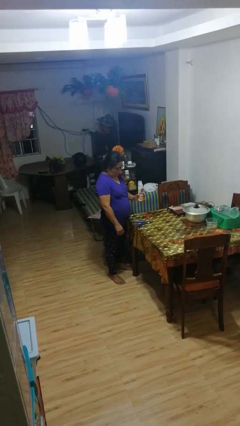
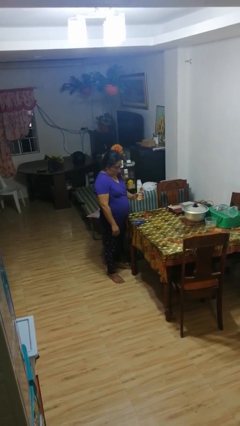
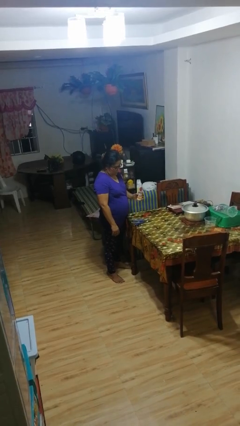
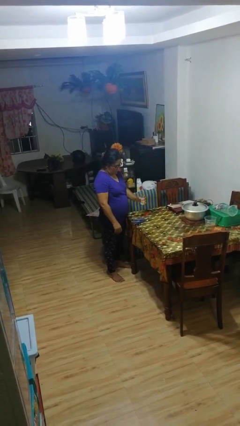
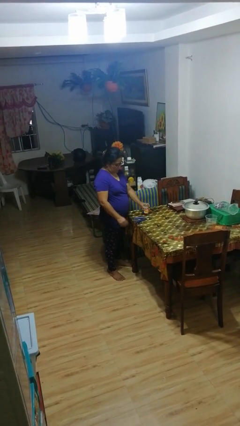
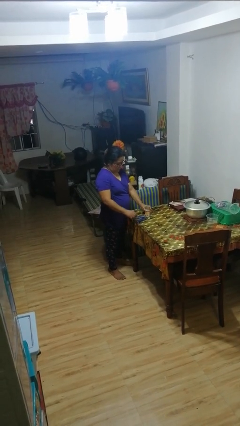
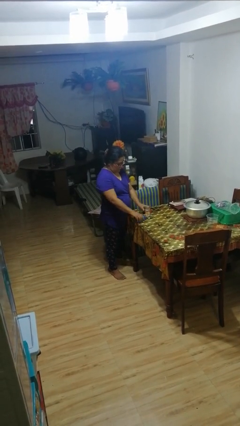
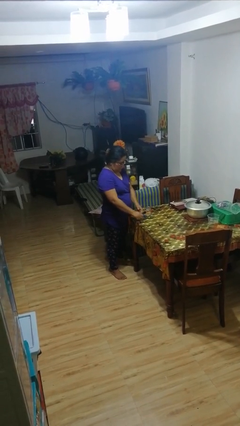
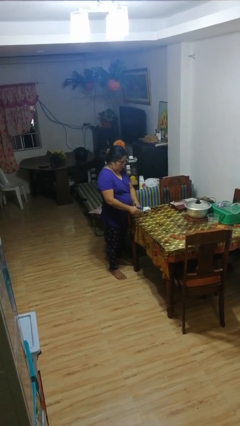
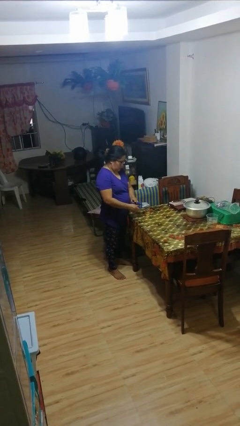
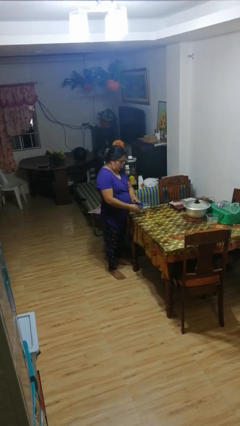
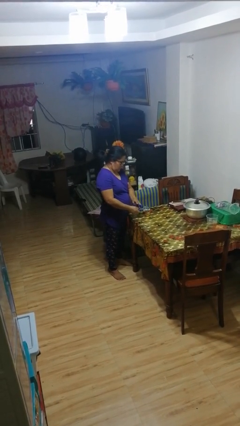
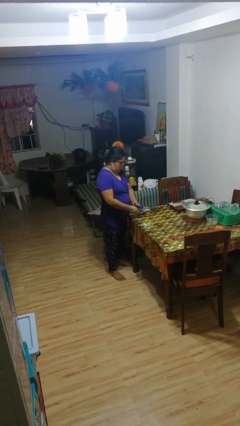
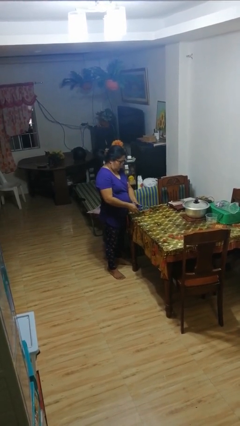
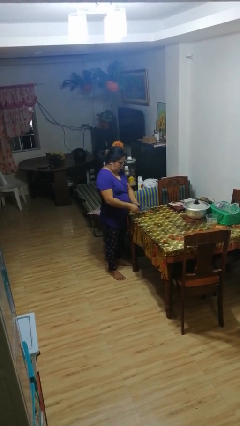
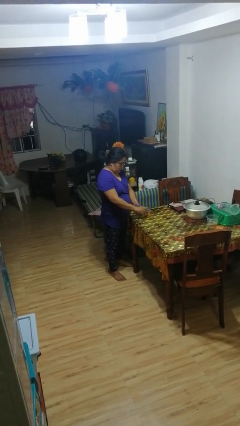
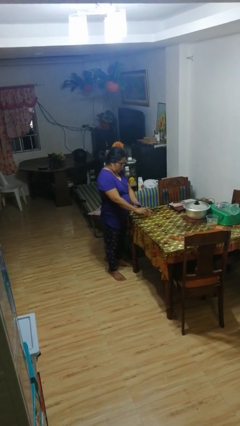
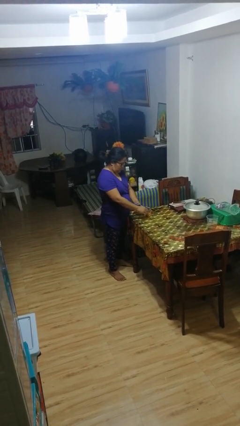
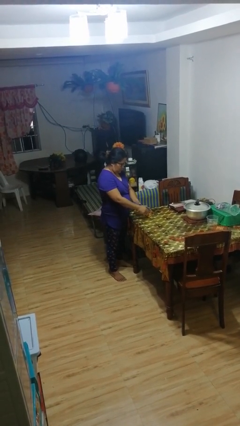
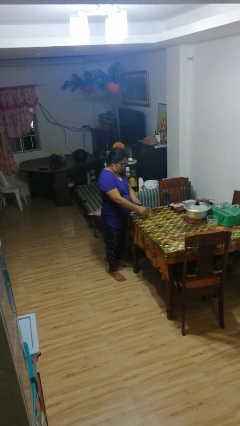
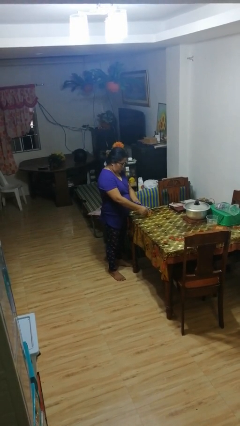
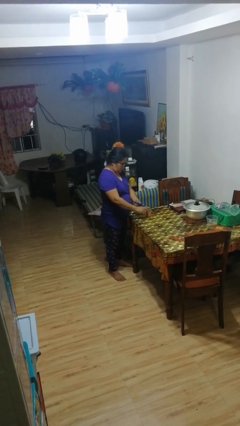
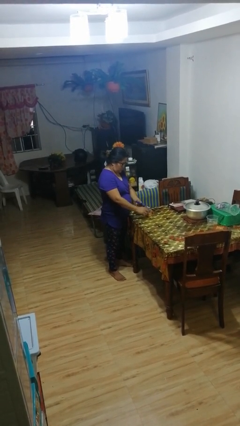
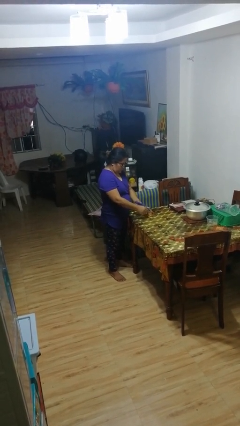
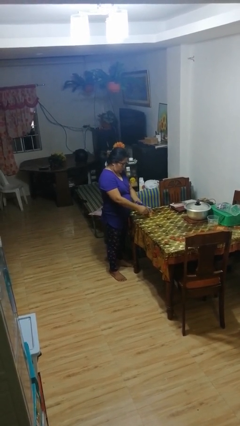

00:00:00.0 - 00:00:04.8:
person opens can with can opener

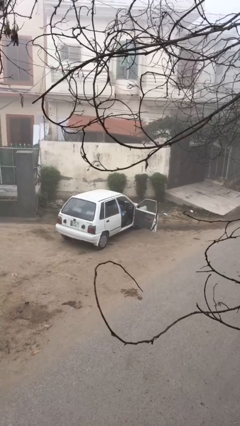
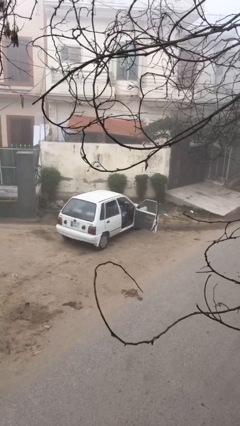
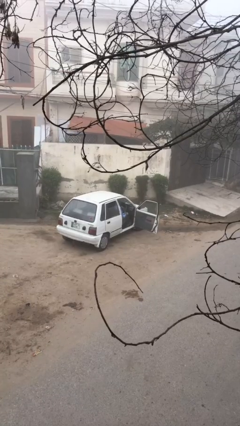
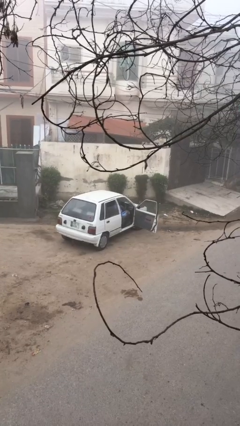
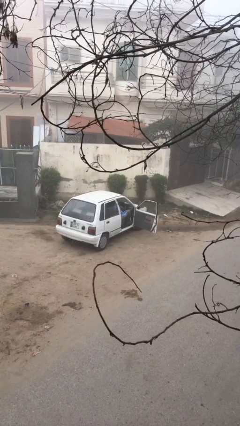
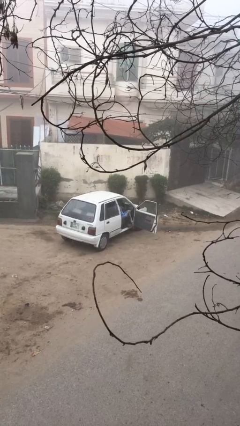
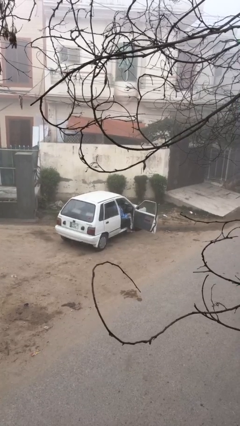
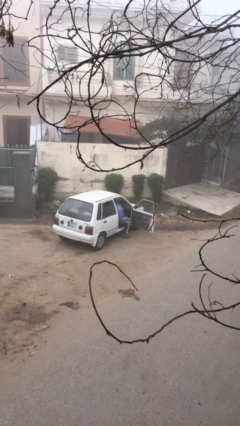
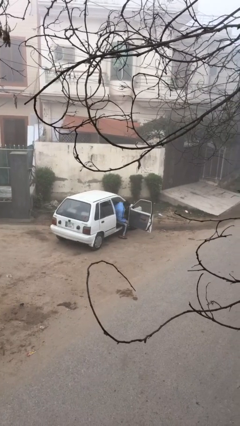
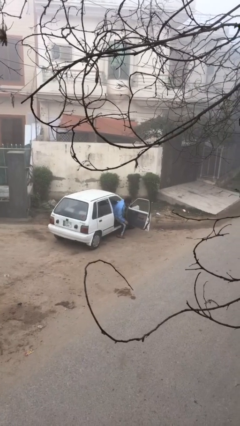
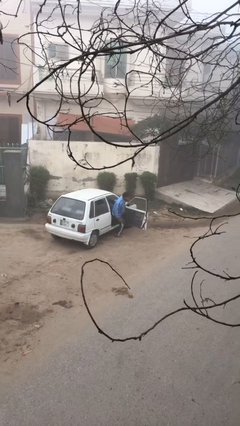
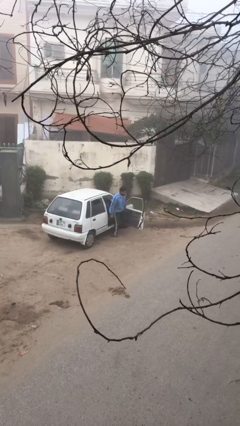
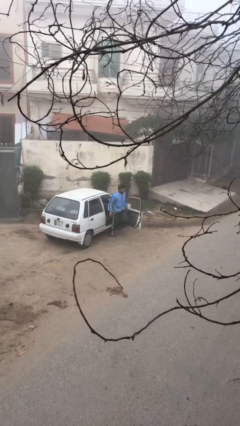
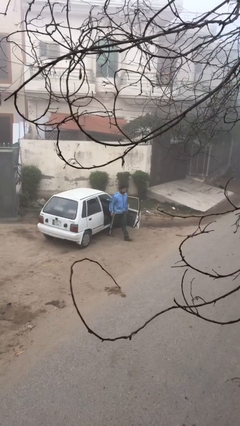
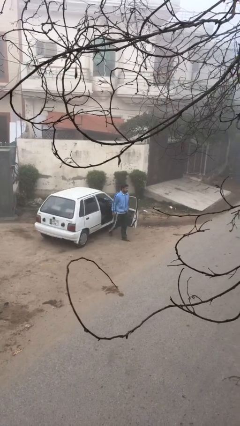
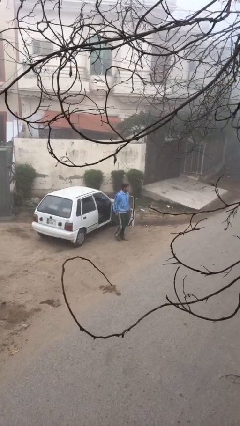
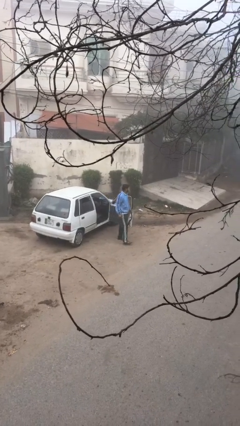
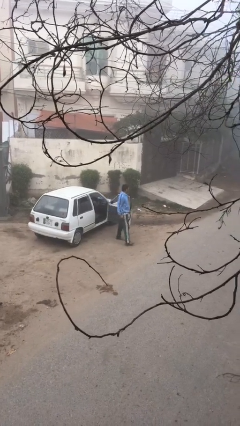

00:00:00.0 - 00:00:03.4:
person exits car

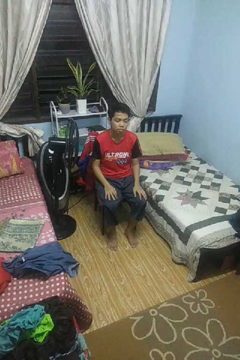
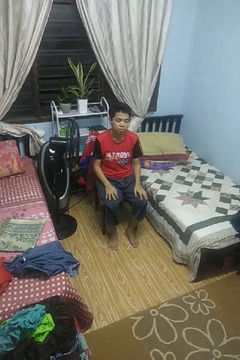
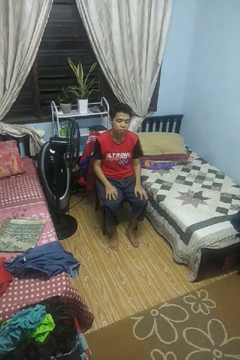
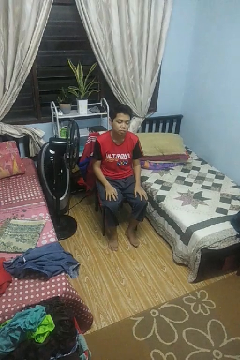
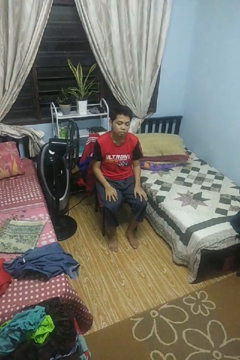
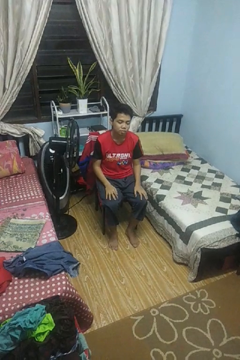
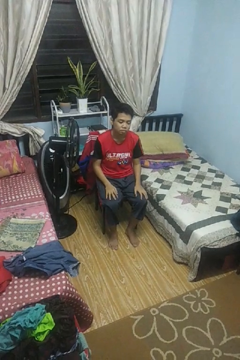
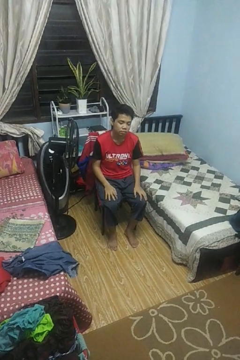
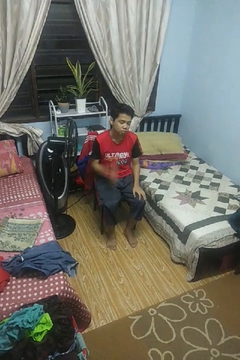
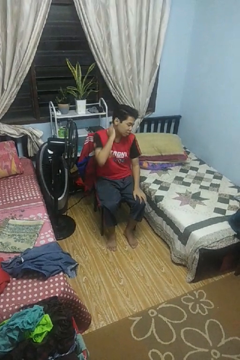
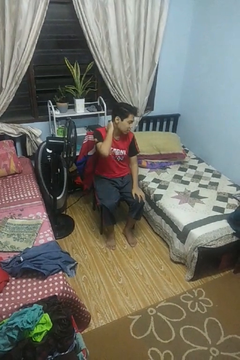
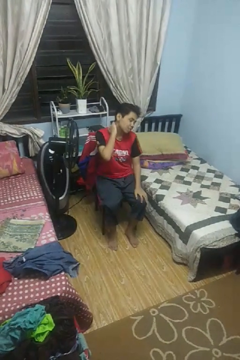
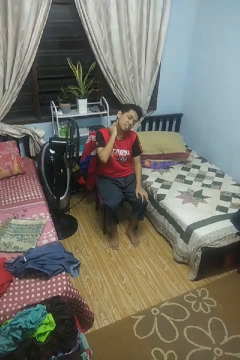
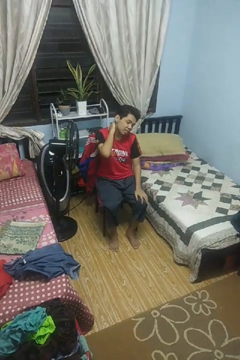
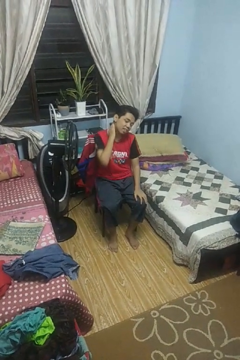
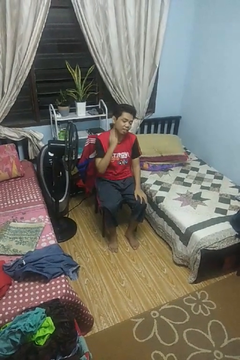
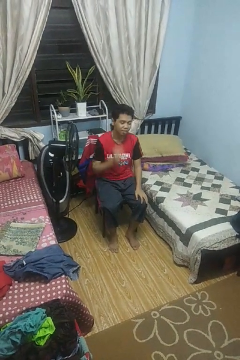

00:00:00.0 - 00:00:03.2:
person rubs neck

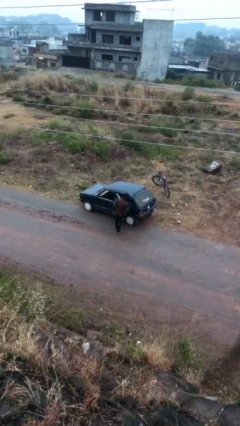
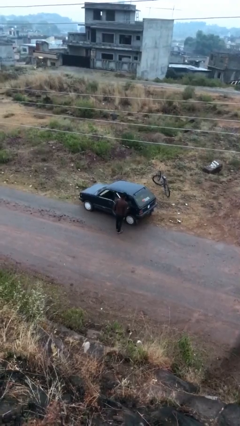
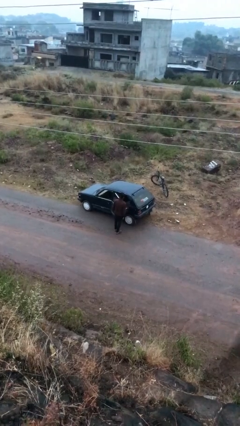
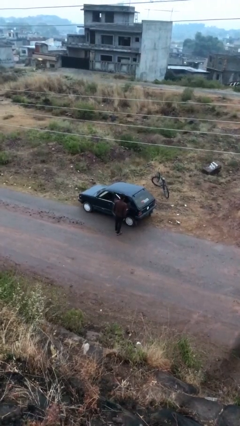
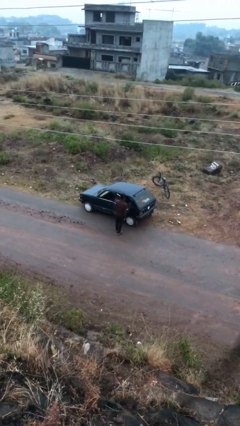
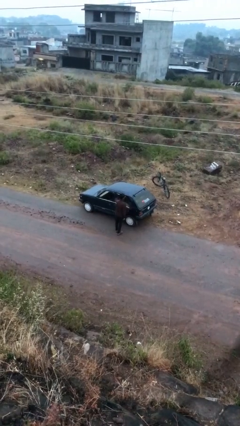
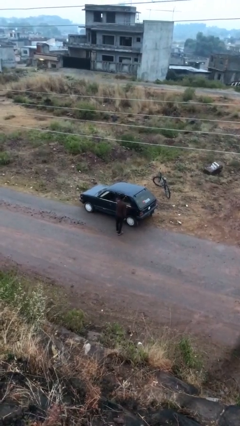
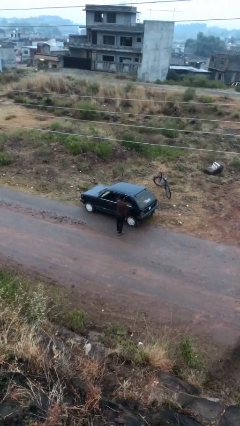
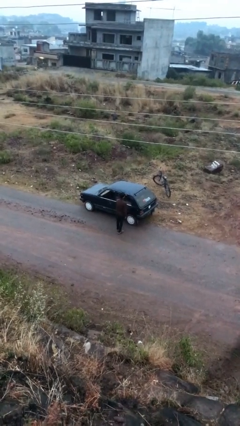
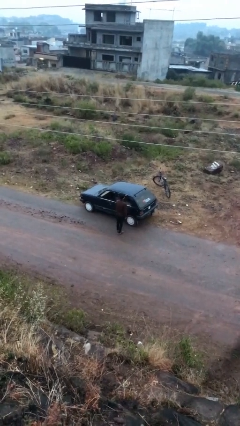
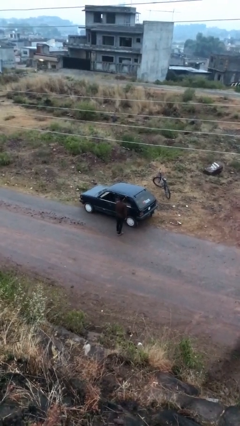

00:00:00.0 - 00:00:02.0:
person closes car door

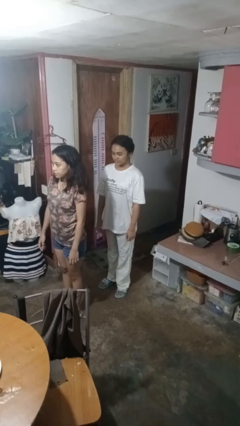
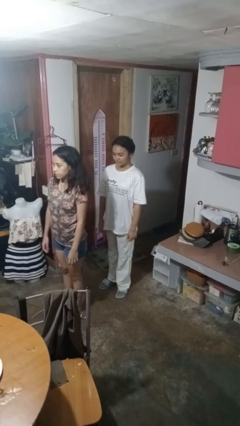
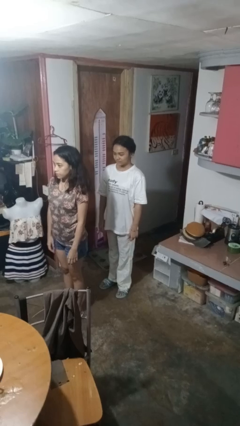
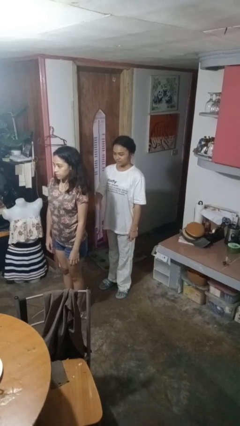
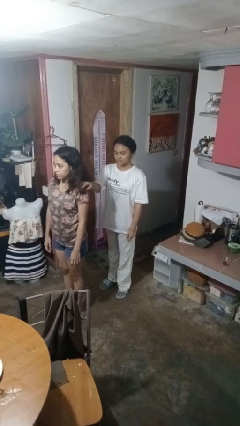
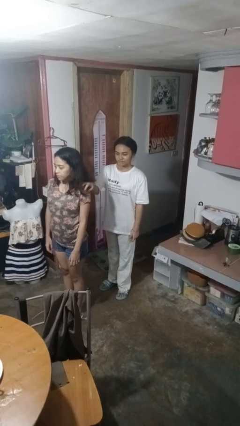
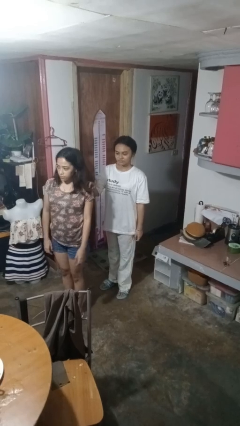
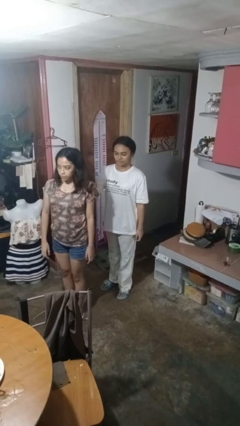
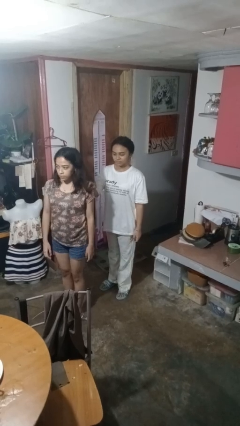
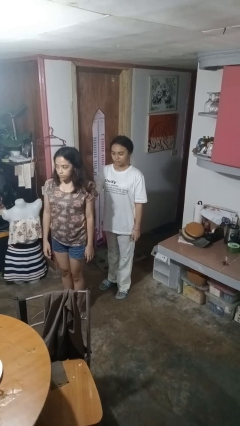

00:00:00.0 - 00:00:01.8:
person grabs person by shoulder

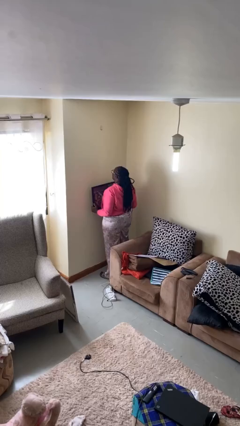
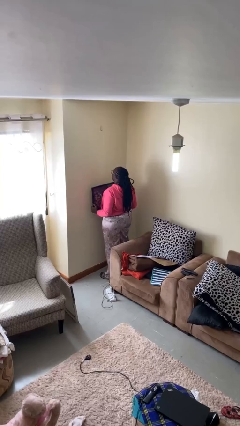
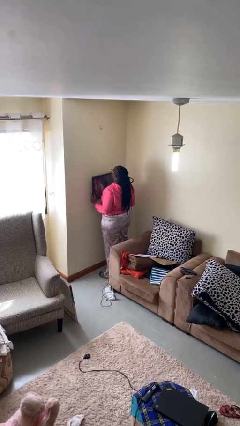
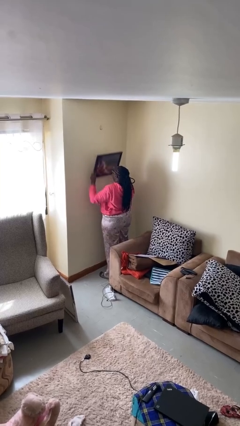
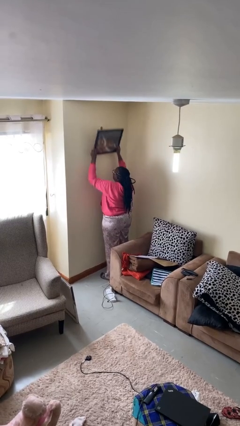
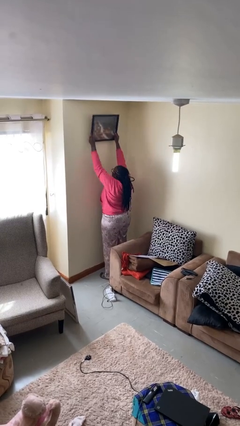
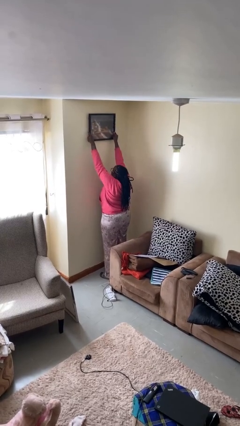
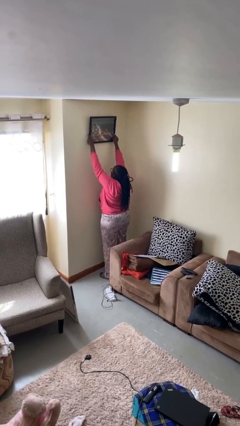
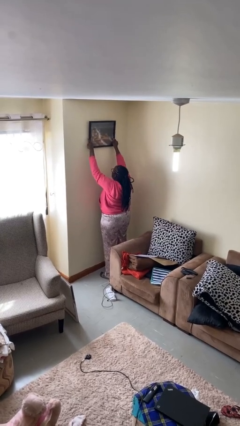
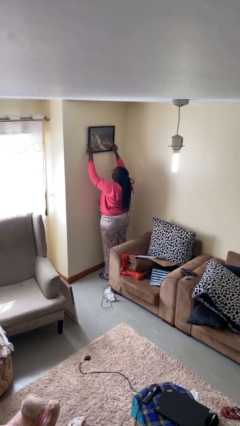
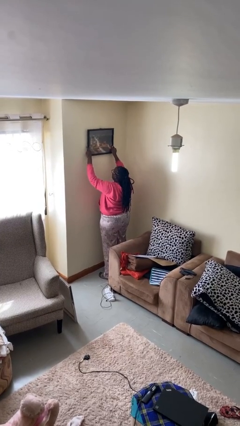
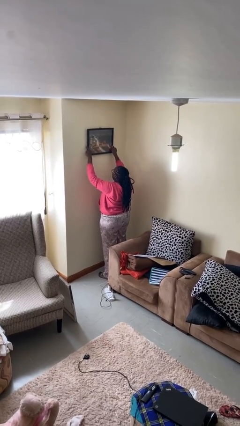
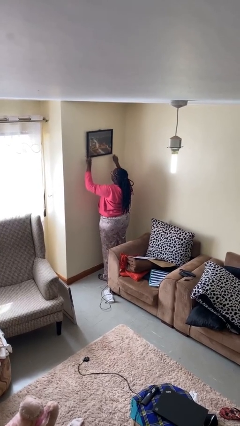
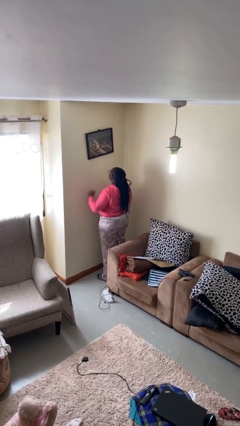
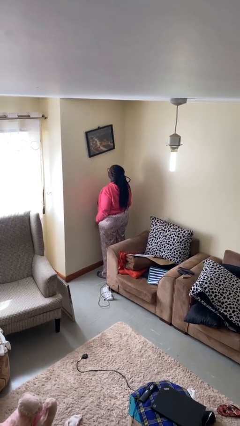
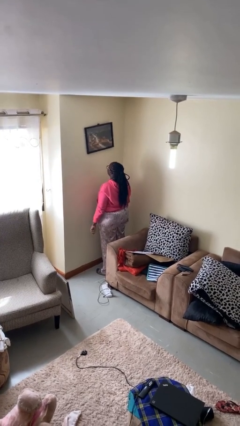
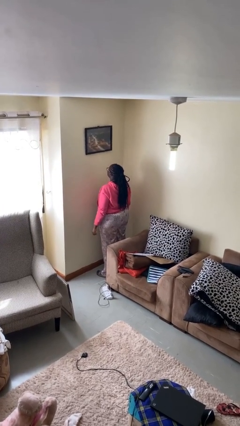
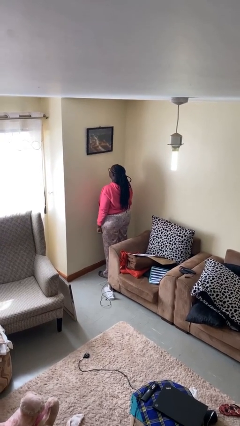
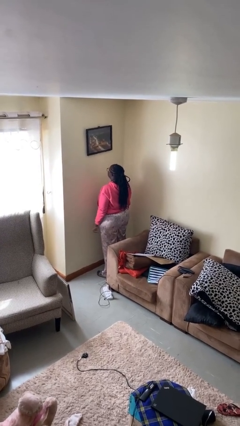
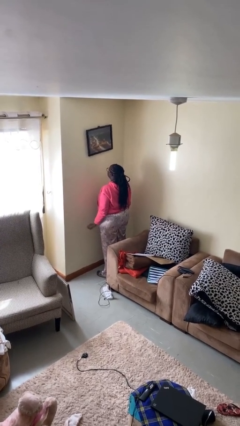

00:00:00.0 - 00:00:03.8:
person puts up picture frame
